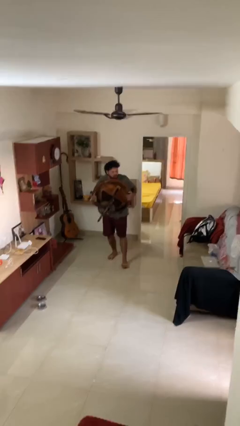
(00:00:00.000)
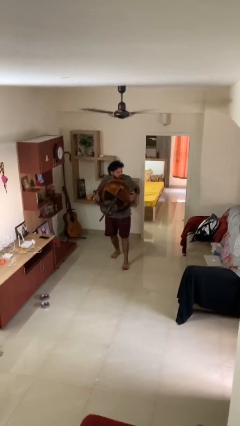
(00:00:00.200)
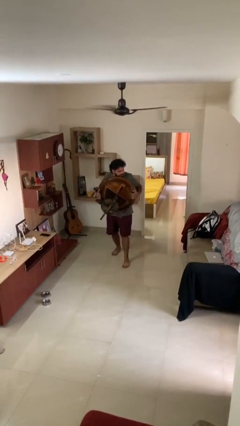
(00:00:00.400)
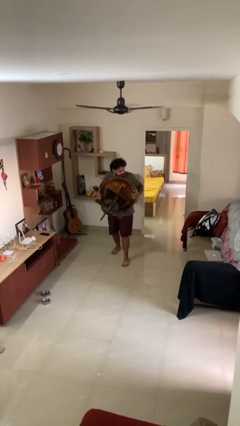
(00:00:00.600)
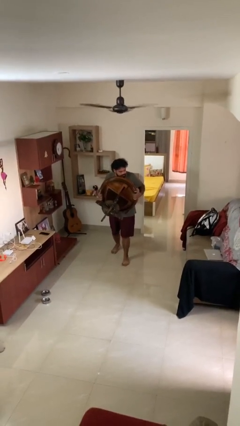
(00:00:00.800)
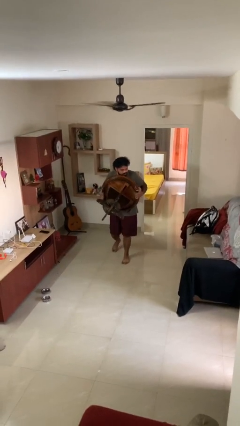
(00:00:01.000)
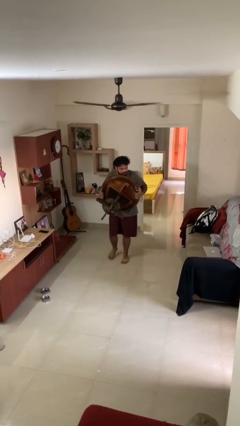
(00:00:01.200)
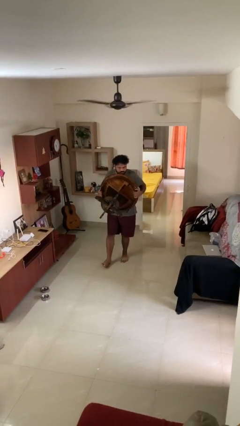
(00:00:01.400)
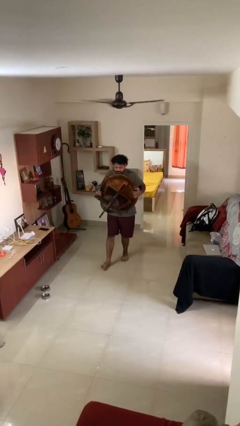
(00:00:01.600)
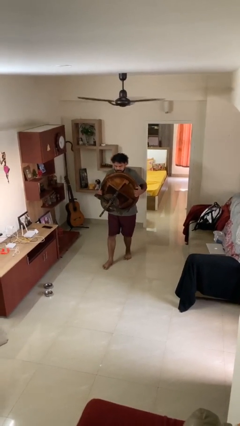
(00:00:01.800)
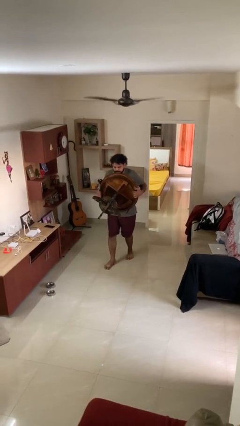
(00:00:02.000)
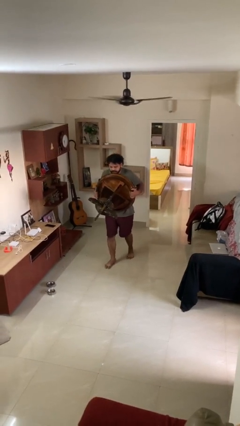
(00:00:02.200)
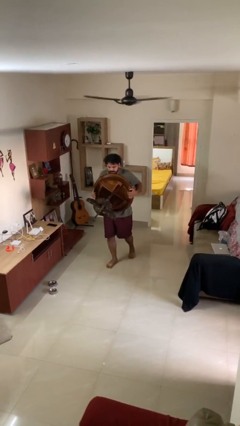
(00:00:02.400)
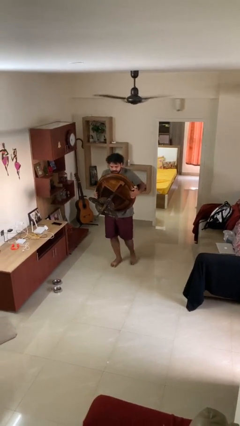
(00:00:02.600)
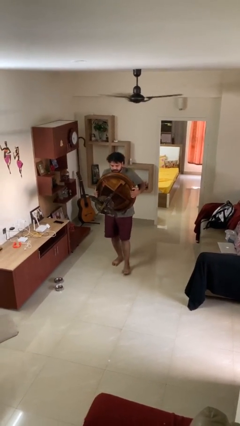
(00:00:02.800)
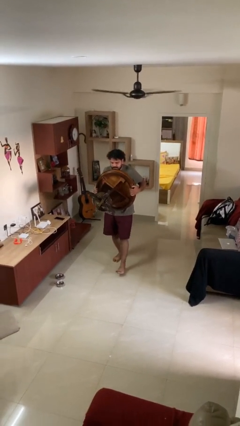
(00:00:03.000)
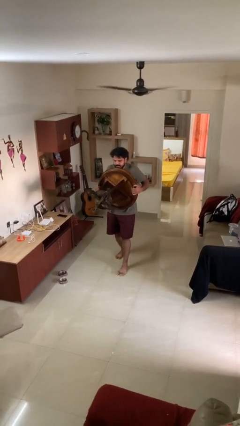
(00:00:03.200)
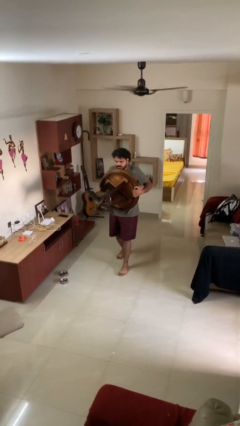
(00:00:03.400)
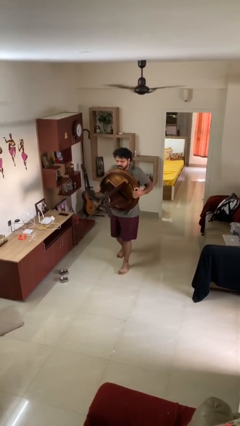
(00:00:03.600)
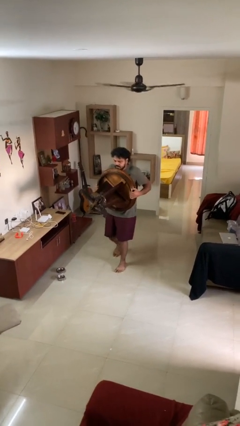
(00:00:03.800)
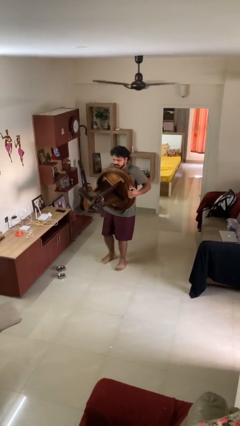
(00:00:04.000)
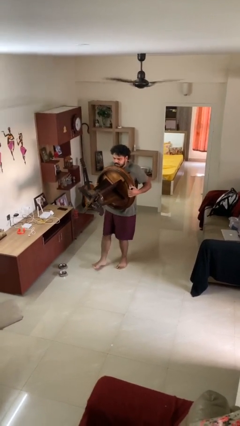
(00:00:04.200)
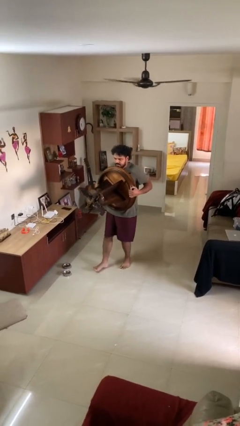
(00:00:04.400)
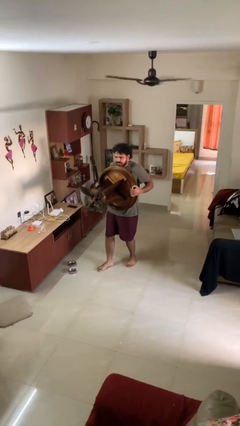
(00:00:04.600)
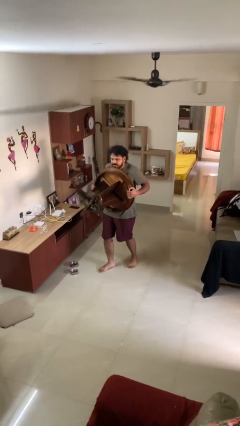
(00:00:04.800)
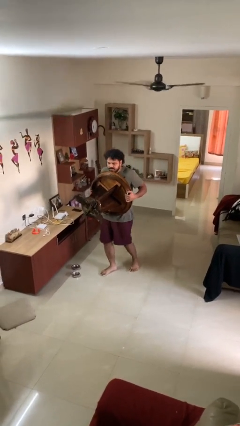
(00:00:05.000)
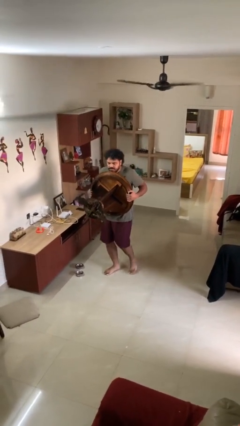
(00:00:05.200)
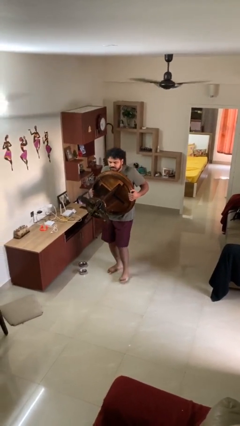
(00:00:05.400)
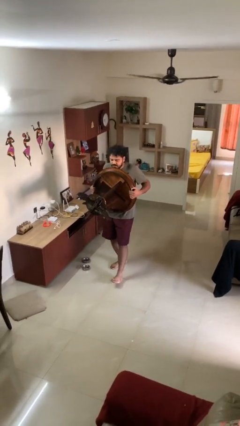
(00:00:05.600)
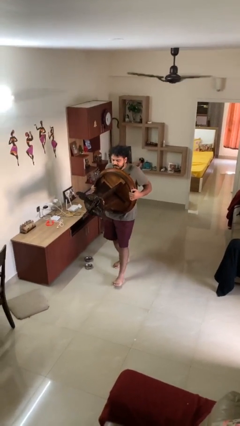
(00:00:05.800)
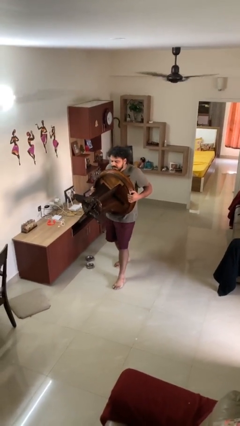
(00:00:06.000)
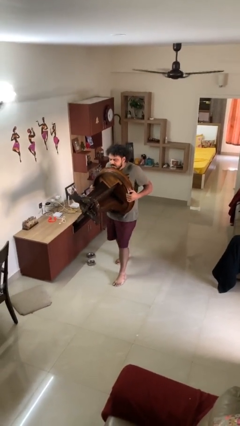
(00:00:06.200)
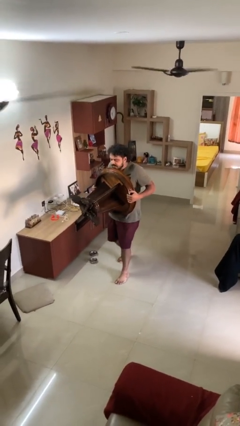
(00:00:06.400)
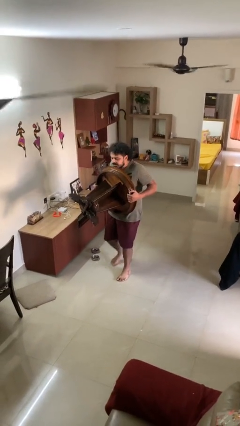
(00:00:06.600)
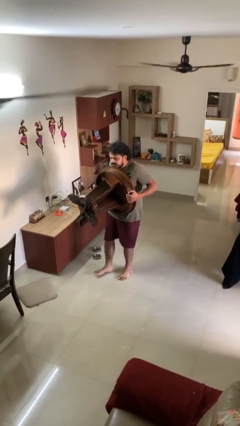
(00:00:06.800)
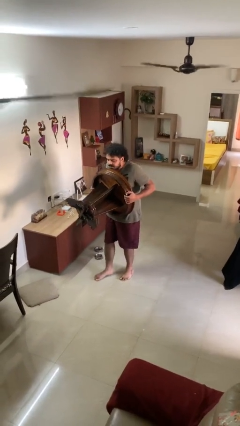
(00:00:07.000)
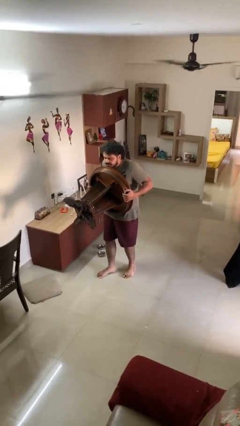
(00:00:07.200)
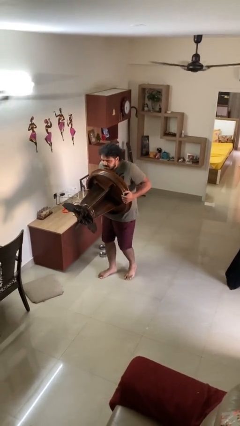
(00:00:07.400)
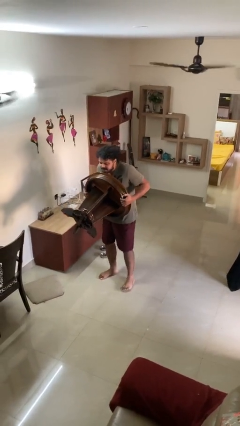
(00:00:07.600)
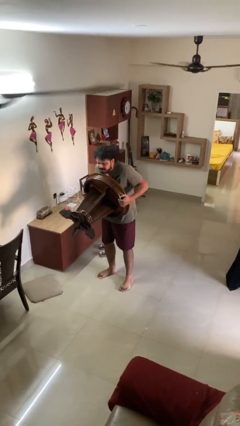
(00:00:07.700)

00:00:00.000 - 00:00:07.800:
person carries heavy object

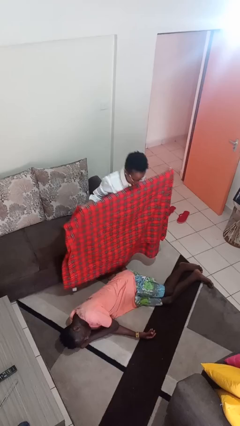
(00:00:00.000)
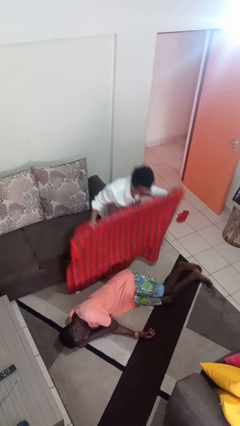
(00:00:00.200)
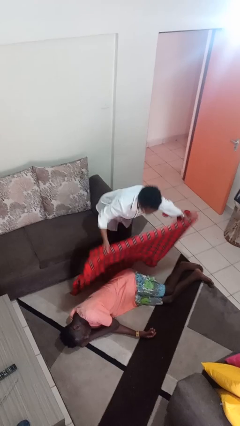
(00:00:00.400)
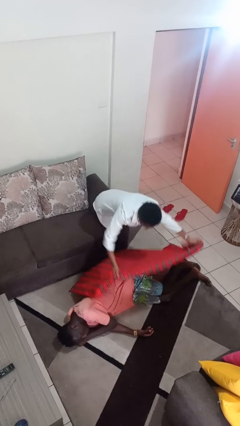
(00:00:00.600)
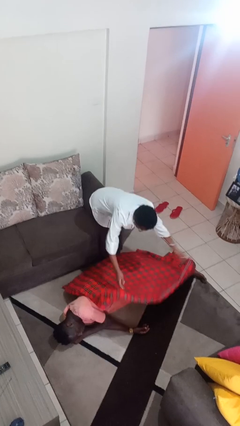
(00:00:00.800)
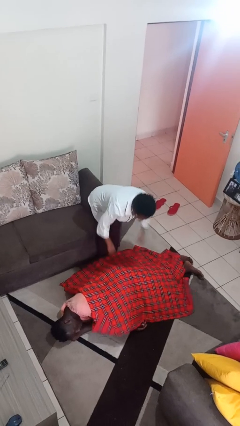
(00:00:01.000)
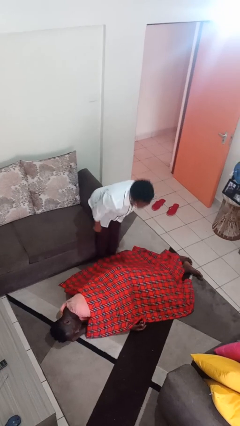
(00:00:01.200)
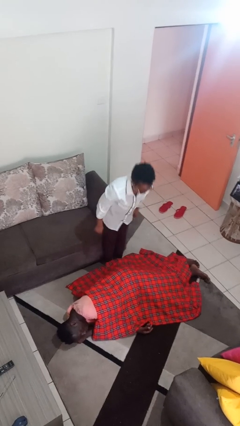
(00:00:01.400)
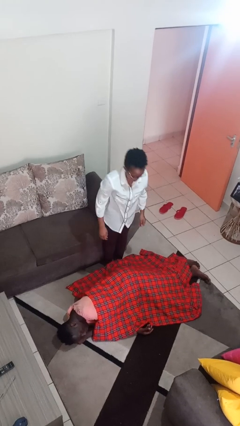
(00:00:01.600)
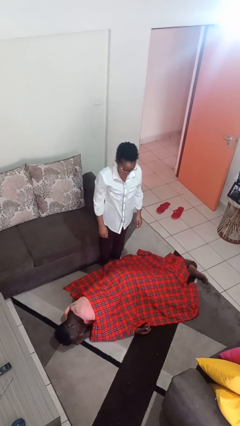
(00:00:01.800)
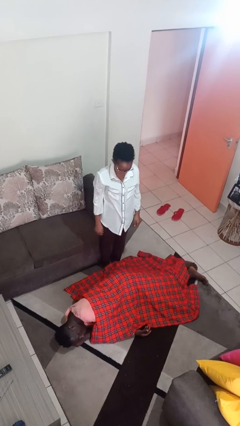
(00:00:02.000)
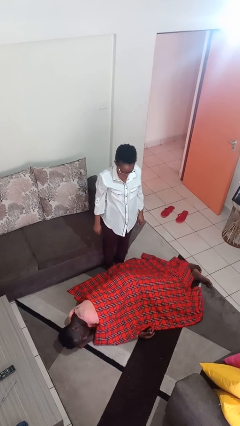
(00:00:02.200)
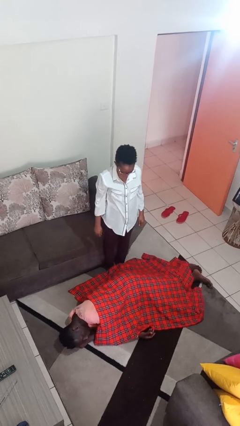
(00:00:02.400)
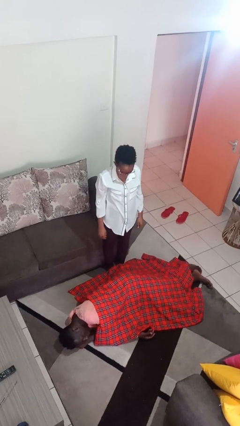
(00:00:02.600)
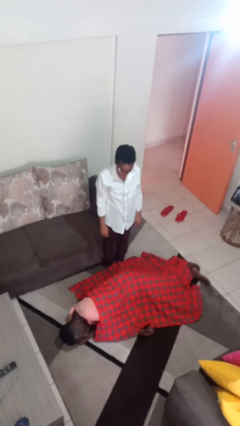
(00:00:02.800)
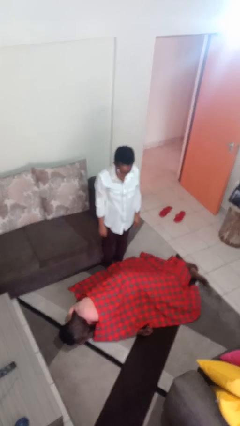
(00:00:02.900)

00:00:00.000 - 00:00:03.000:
person covers friend with blanket

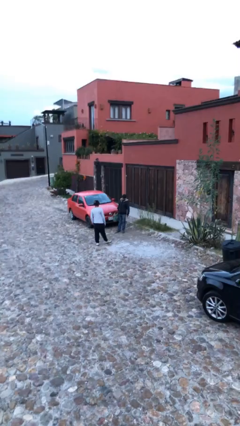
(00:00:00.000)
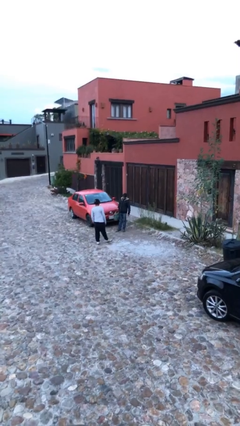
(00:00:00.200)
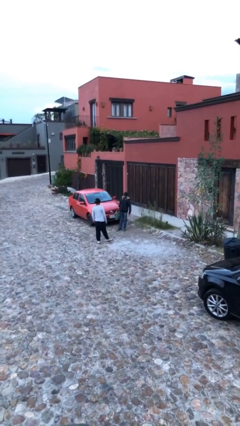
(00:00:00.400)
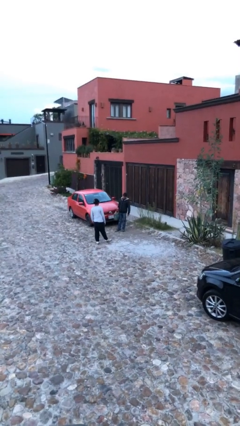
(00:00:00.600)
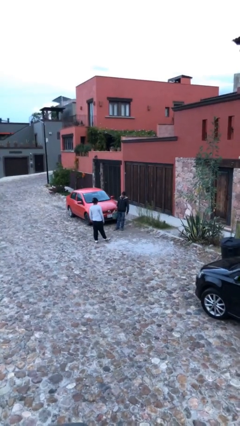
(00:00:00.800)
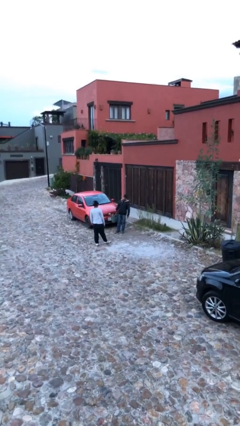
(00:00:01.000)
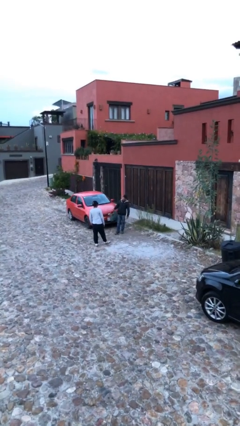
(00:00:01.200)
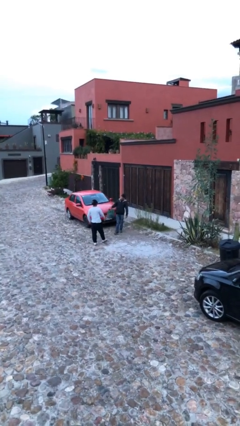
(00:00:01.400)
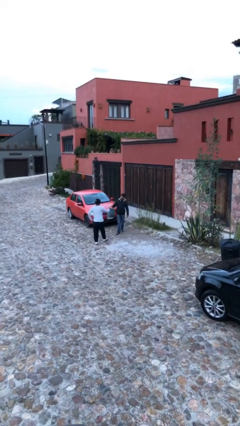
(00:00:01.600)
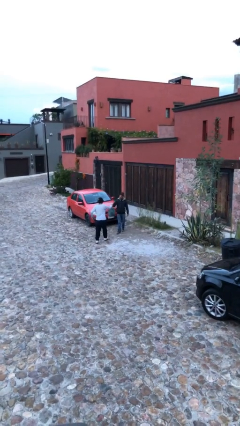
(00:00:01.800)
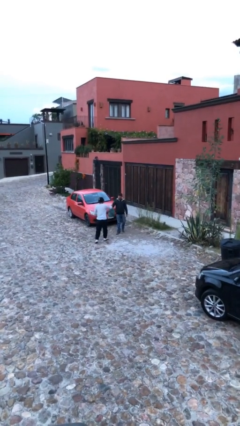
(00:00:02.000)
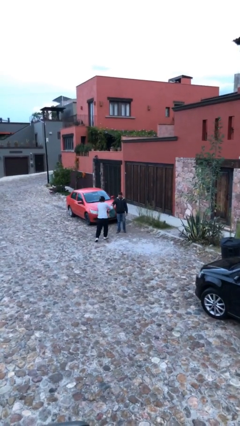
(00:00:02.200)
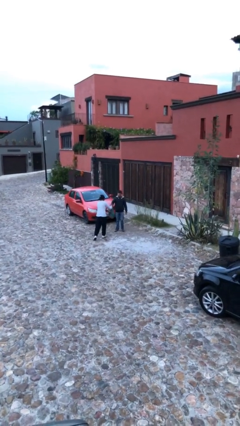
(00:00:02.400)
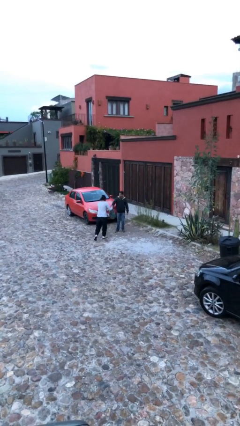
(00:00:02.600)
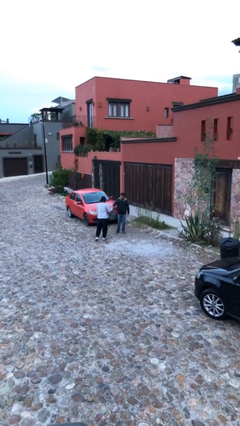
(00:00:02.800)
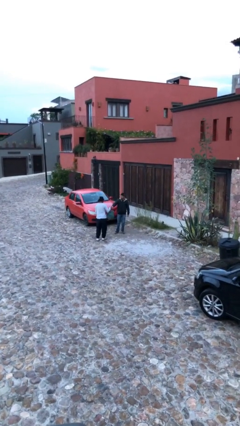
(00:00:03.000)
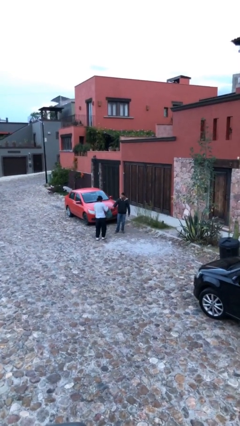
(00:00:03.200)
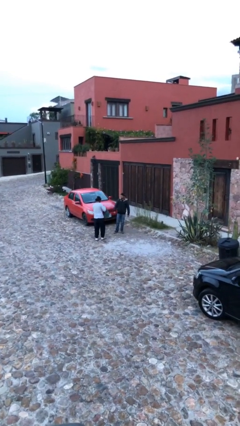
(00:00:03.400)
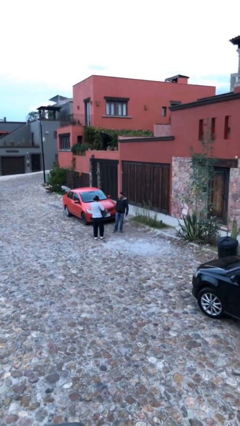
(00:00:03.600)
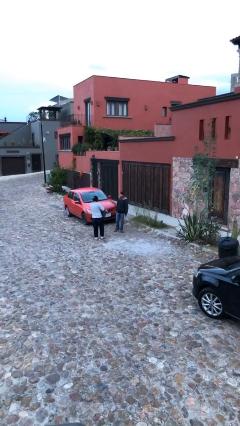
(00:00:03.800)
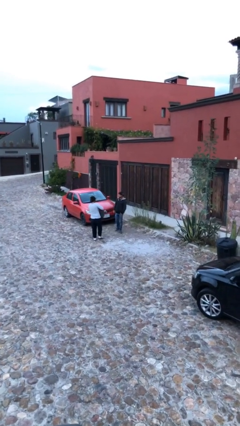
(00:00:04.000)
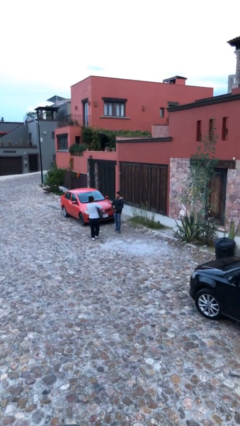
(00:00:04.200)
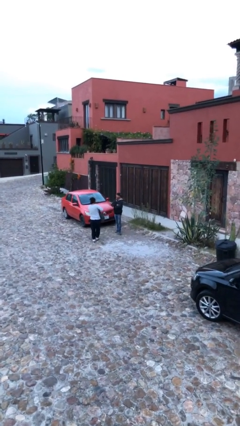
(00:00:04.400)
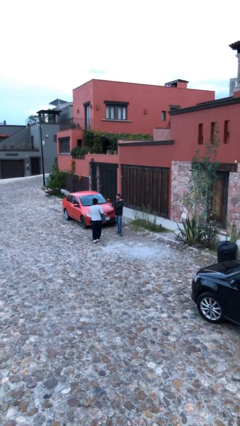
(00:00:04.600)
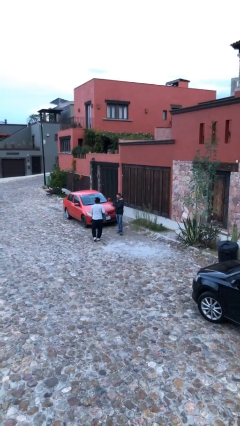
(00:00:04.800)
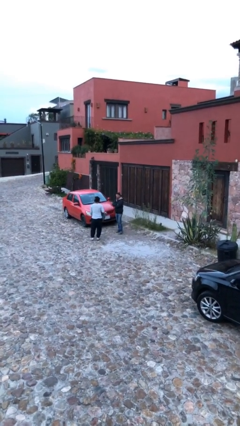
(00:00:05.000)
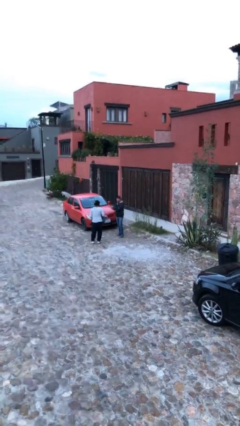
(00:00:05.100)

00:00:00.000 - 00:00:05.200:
person transfers object to person

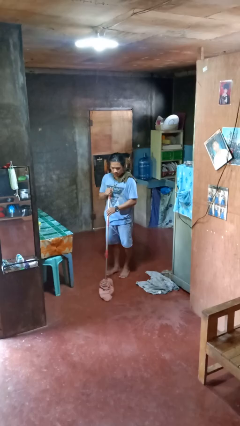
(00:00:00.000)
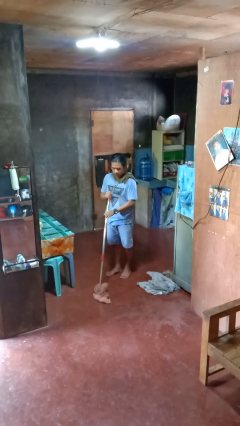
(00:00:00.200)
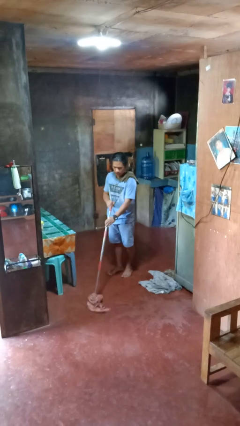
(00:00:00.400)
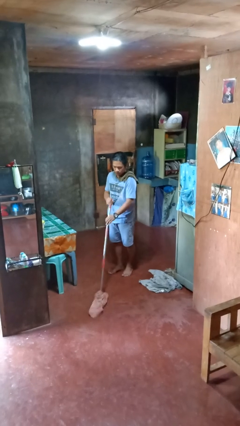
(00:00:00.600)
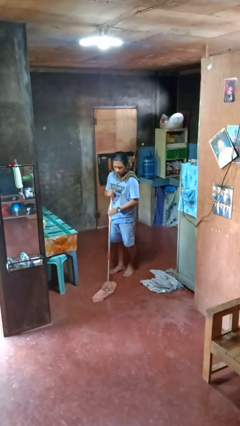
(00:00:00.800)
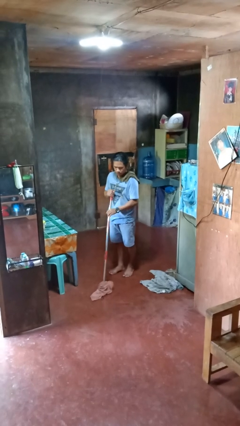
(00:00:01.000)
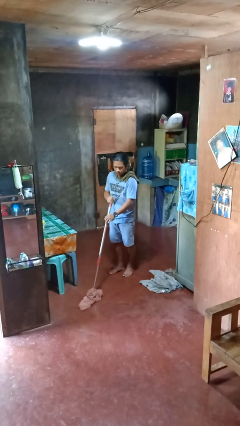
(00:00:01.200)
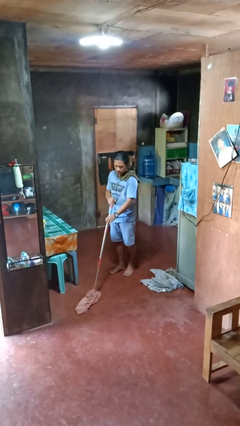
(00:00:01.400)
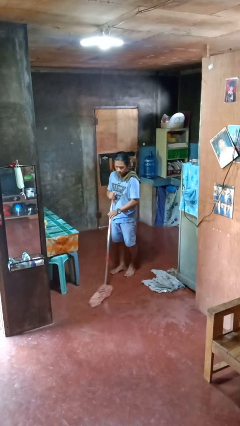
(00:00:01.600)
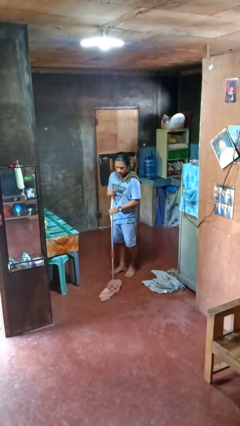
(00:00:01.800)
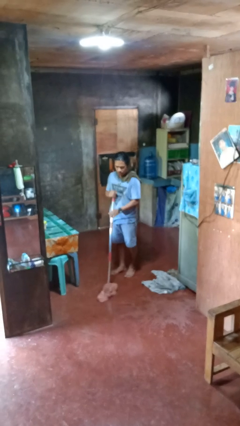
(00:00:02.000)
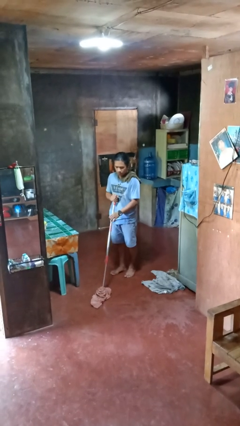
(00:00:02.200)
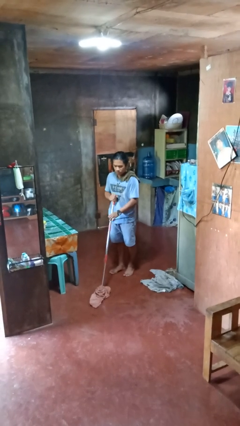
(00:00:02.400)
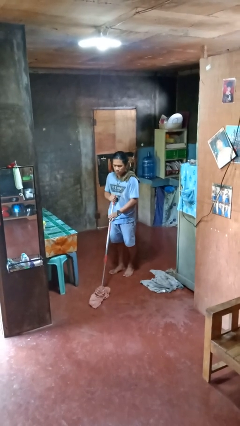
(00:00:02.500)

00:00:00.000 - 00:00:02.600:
person mops
